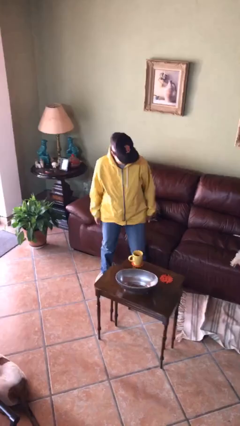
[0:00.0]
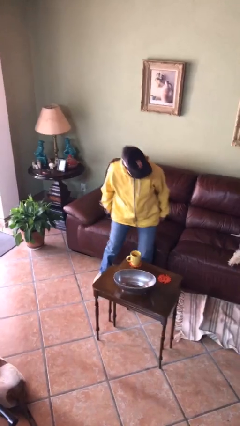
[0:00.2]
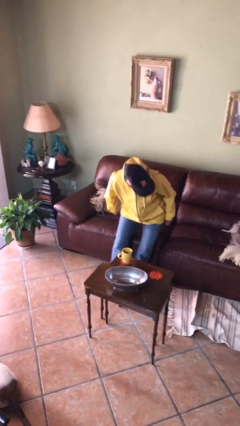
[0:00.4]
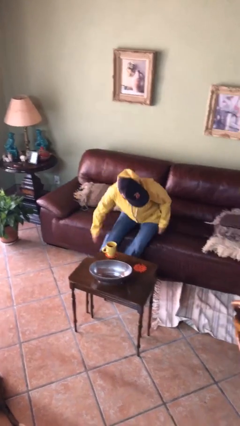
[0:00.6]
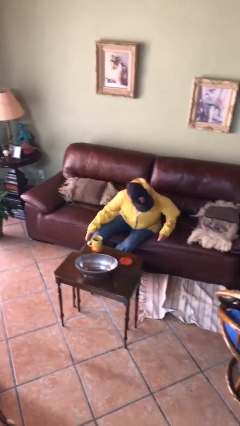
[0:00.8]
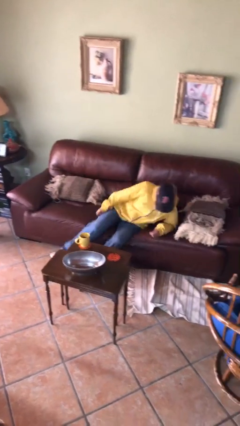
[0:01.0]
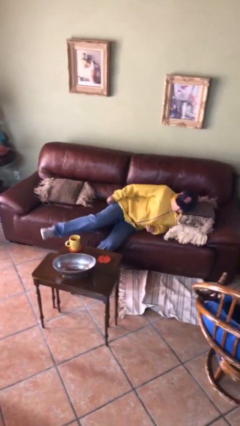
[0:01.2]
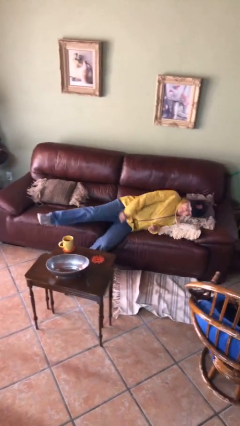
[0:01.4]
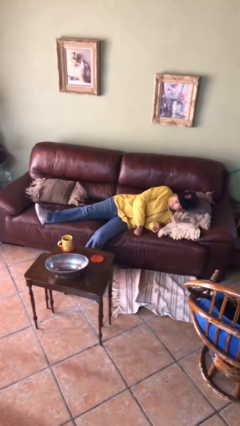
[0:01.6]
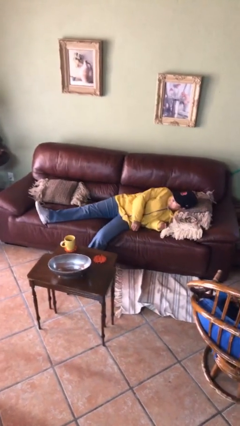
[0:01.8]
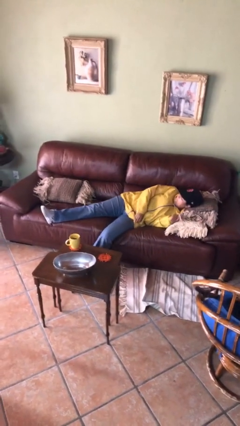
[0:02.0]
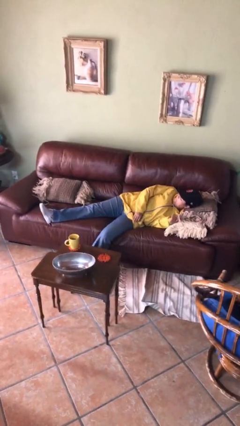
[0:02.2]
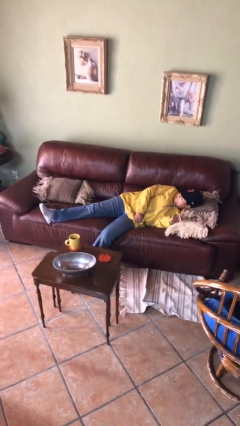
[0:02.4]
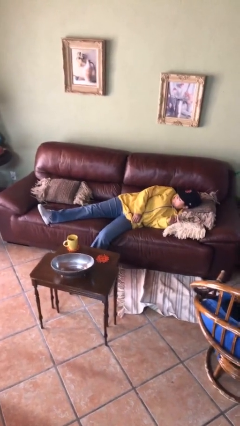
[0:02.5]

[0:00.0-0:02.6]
person lies down on couch

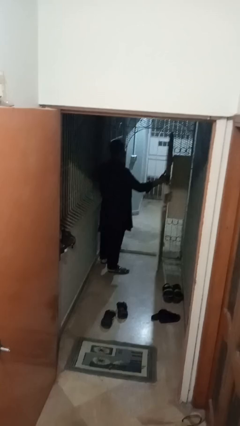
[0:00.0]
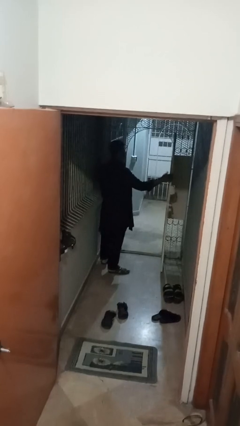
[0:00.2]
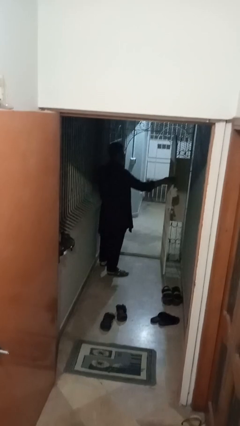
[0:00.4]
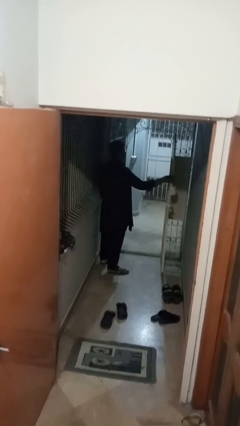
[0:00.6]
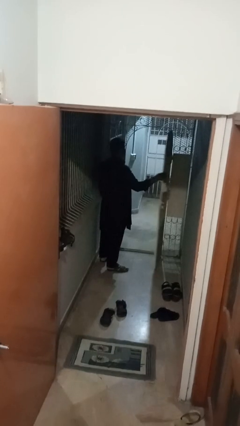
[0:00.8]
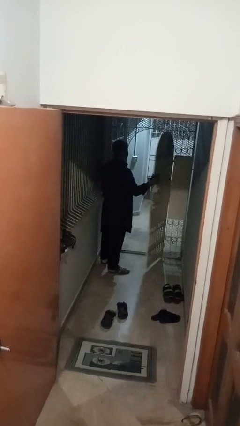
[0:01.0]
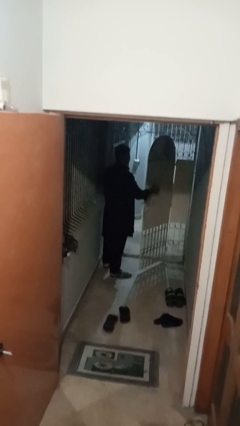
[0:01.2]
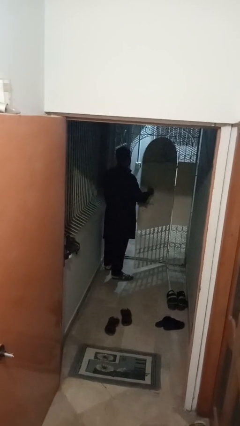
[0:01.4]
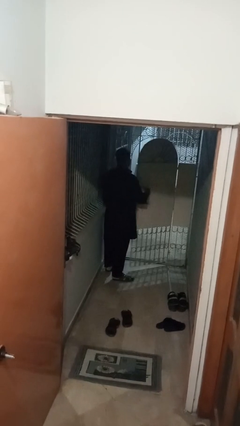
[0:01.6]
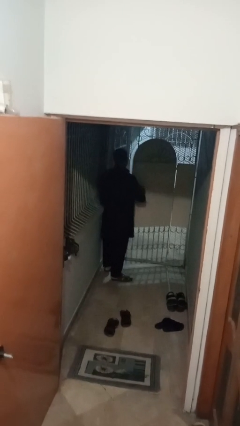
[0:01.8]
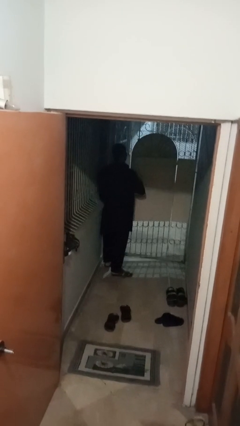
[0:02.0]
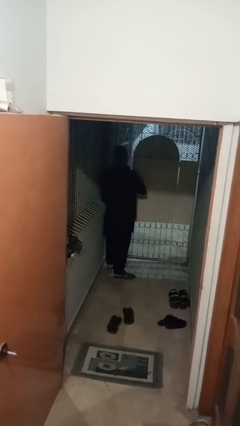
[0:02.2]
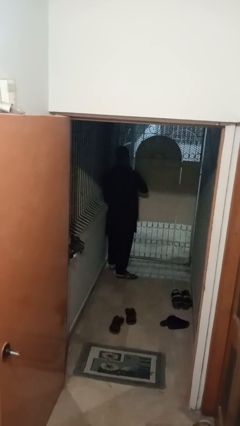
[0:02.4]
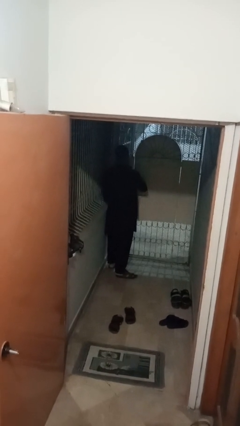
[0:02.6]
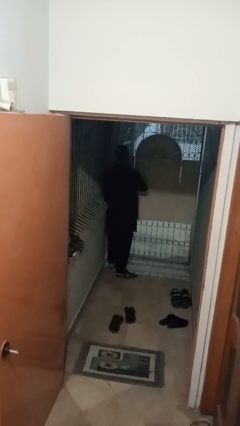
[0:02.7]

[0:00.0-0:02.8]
person closes gate

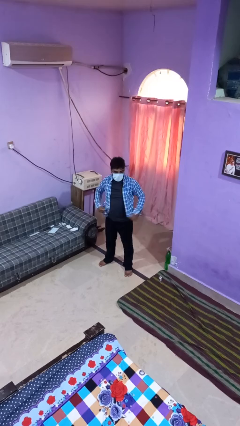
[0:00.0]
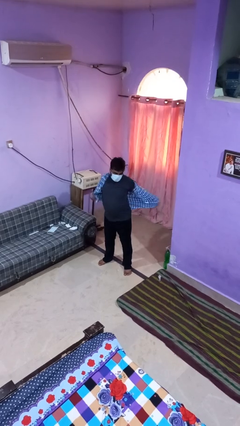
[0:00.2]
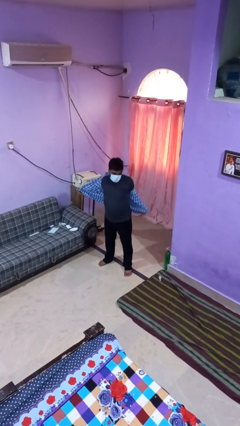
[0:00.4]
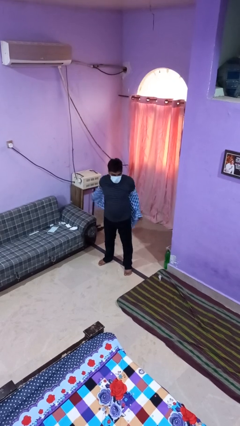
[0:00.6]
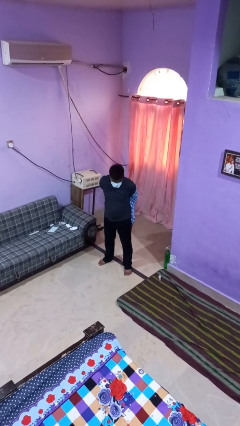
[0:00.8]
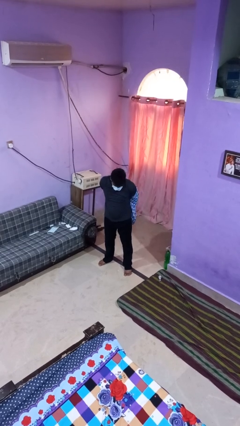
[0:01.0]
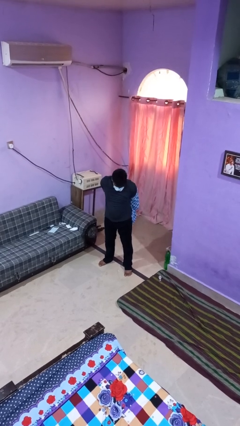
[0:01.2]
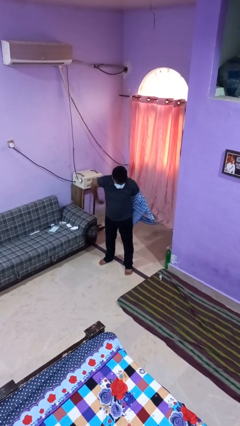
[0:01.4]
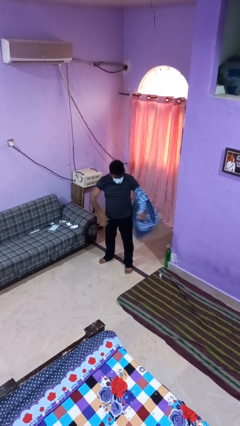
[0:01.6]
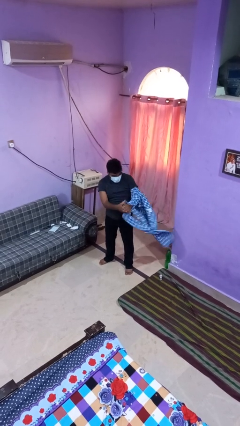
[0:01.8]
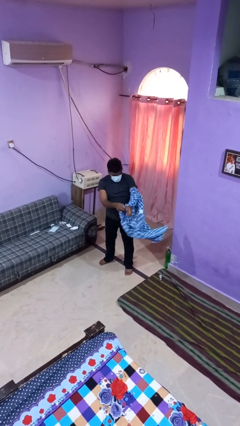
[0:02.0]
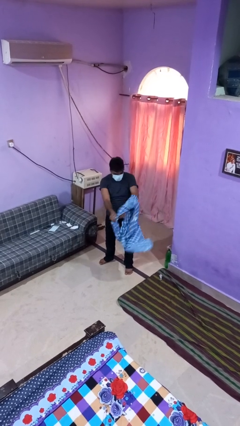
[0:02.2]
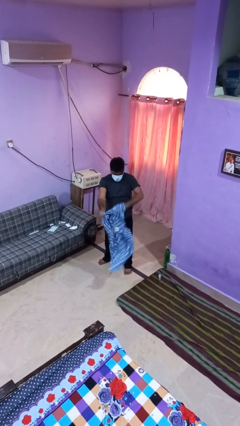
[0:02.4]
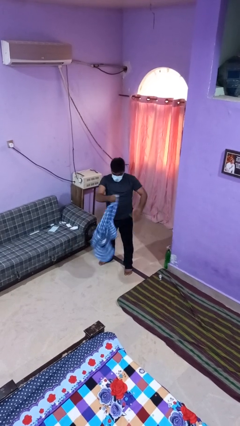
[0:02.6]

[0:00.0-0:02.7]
person takes off shirt

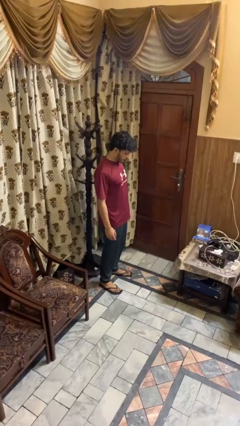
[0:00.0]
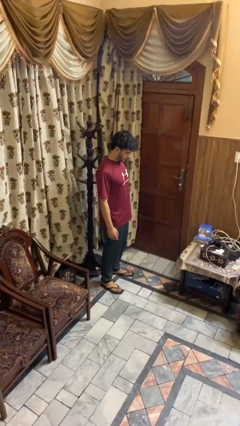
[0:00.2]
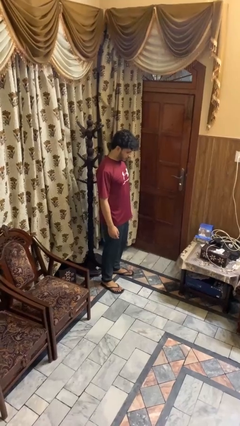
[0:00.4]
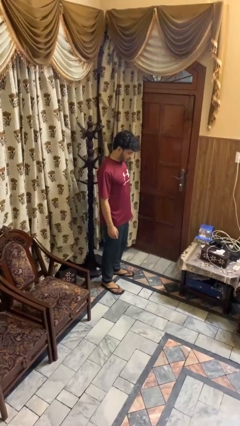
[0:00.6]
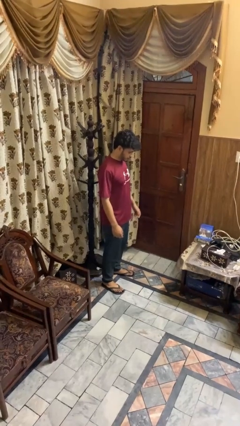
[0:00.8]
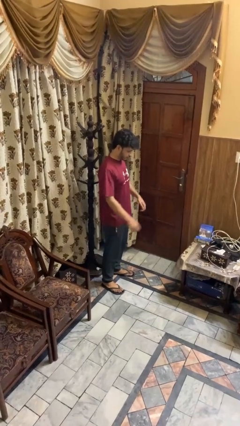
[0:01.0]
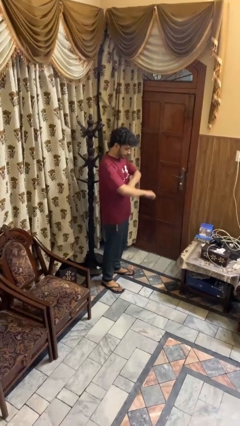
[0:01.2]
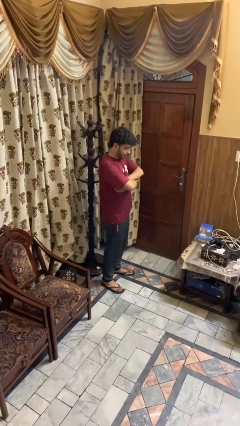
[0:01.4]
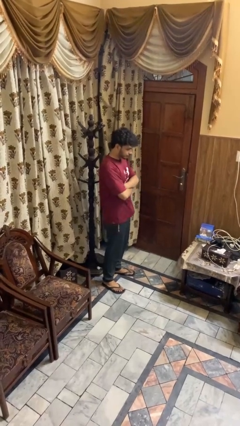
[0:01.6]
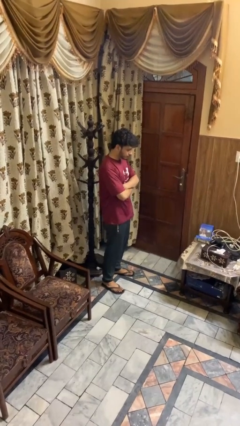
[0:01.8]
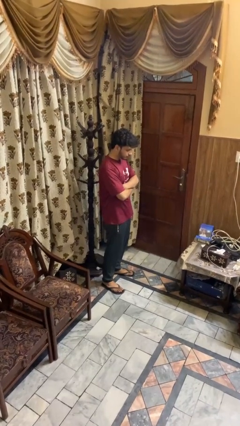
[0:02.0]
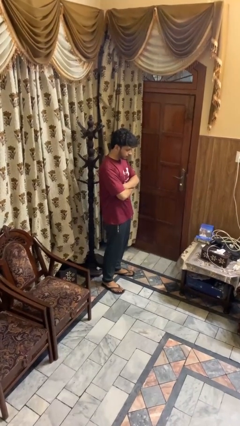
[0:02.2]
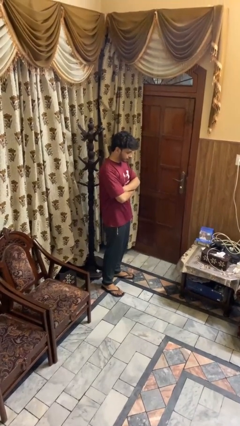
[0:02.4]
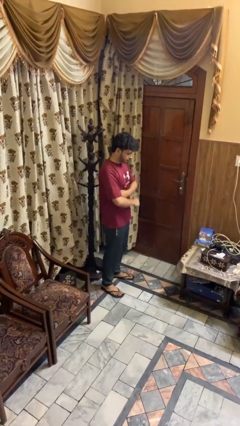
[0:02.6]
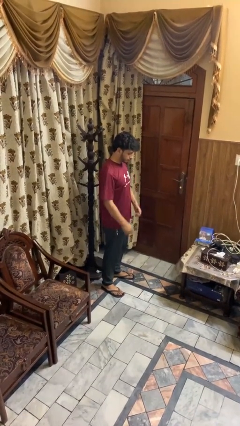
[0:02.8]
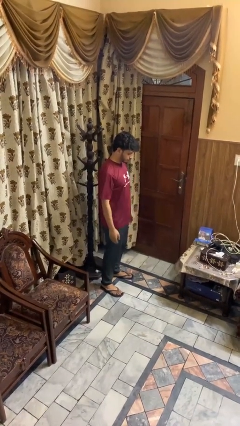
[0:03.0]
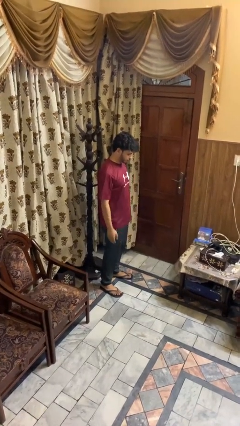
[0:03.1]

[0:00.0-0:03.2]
person crosses arms

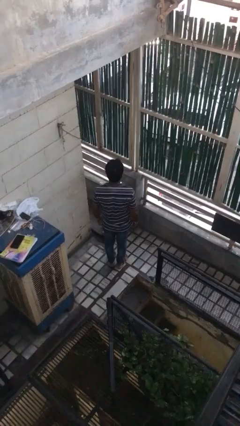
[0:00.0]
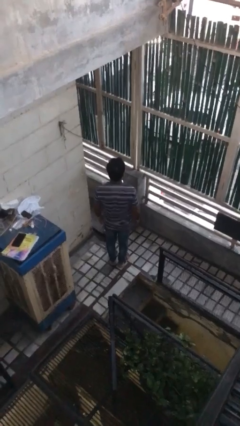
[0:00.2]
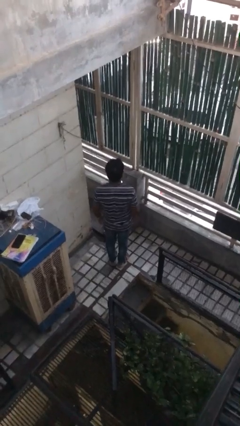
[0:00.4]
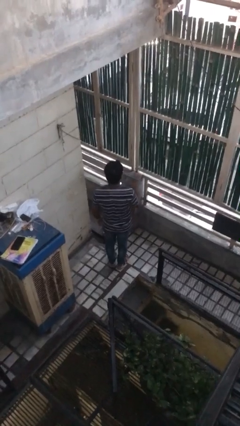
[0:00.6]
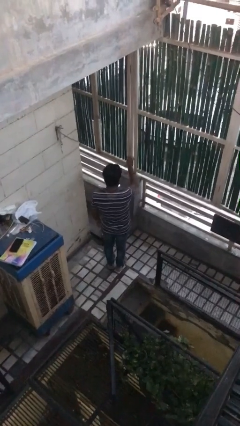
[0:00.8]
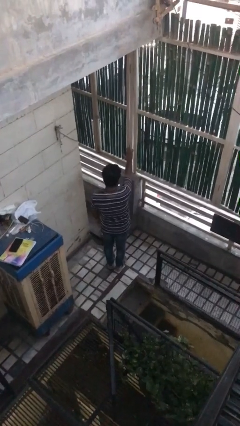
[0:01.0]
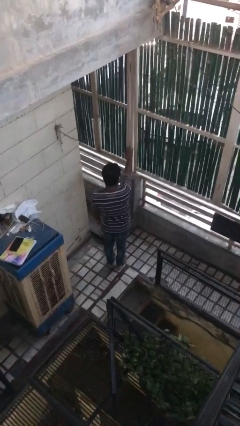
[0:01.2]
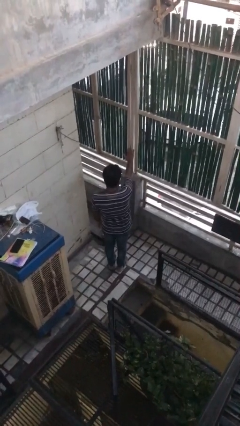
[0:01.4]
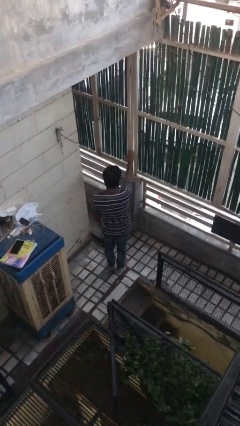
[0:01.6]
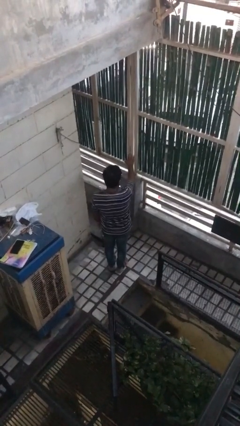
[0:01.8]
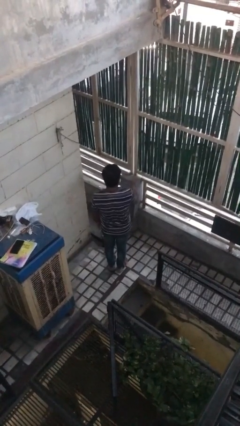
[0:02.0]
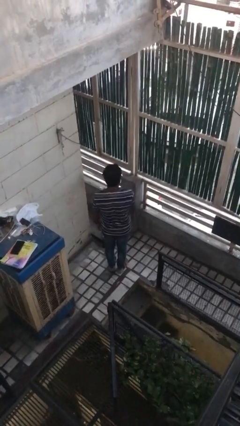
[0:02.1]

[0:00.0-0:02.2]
person gestures stop

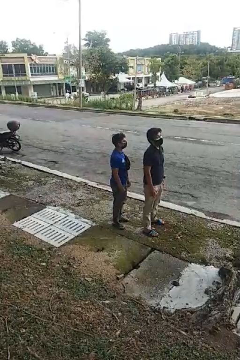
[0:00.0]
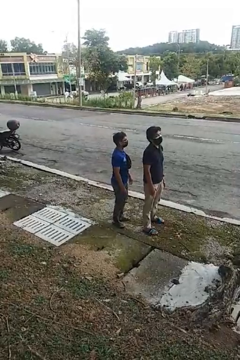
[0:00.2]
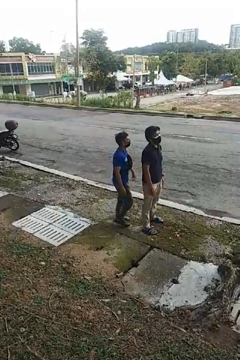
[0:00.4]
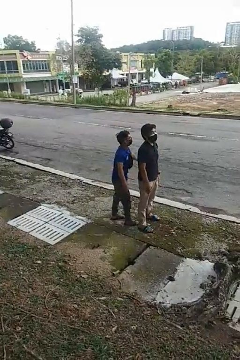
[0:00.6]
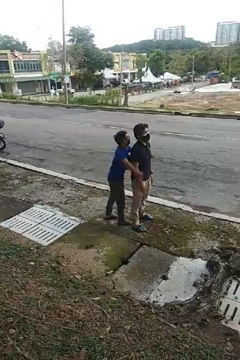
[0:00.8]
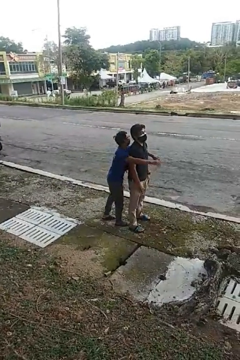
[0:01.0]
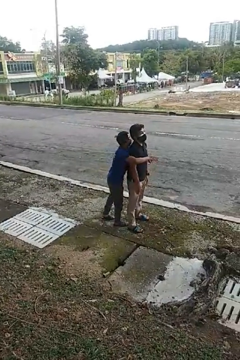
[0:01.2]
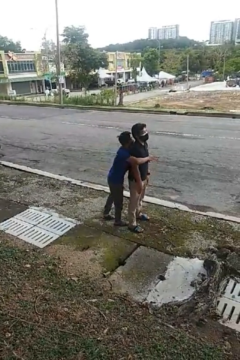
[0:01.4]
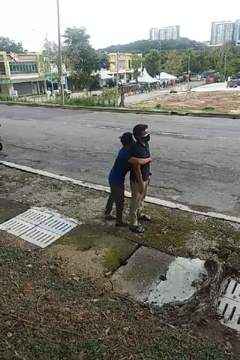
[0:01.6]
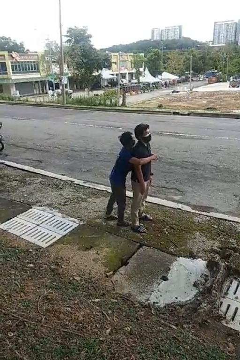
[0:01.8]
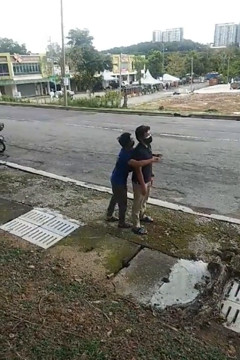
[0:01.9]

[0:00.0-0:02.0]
person hugs person from behind

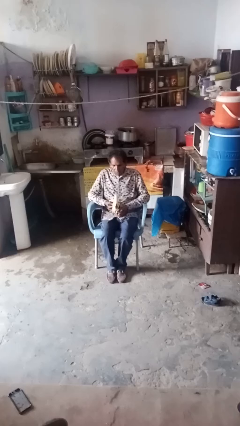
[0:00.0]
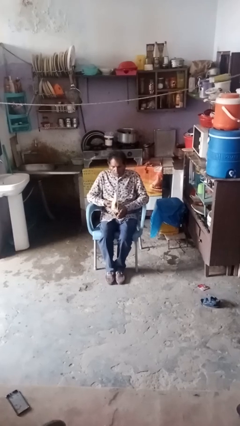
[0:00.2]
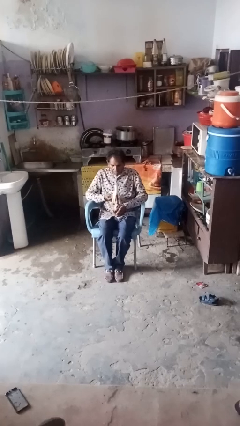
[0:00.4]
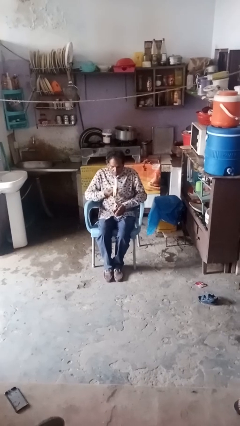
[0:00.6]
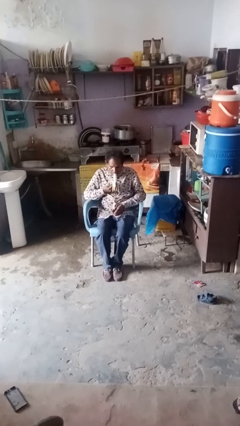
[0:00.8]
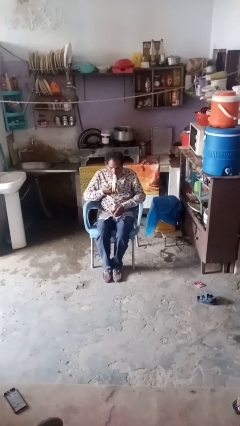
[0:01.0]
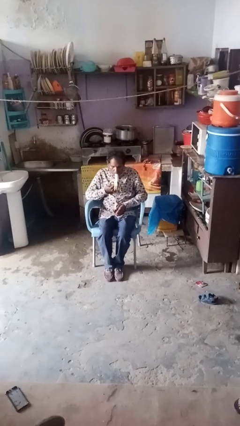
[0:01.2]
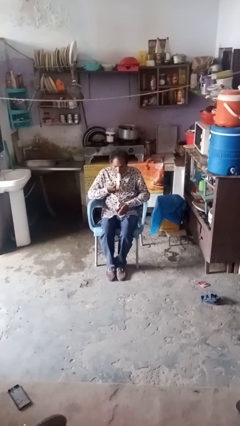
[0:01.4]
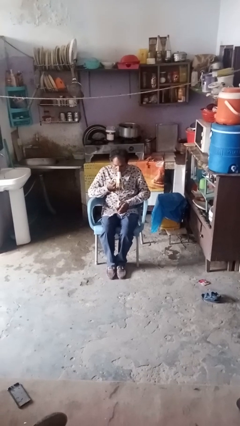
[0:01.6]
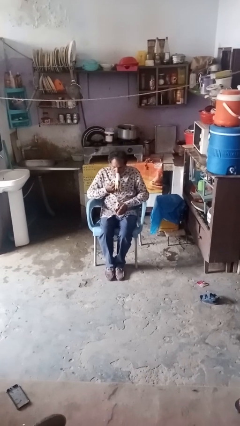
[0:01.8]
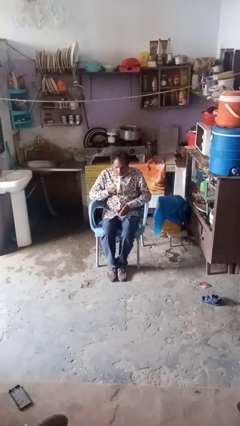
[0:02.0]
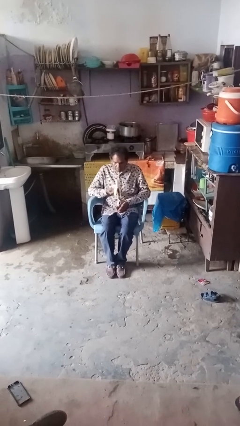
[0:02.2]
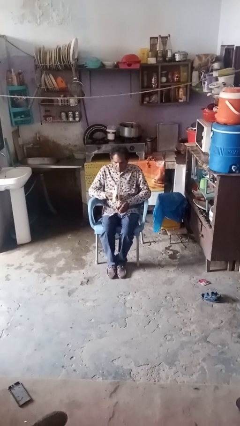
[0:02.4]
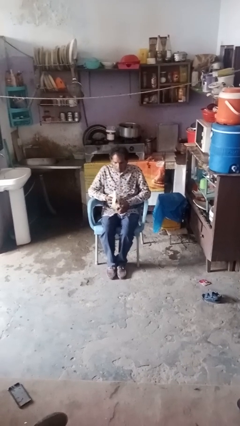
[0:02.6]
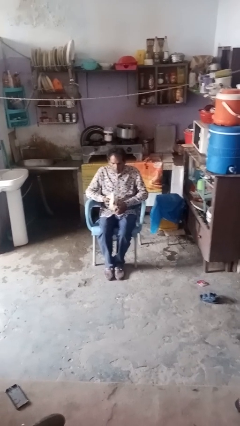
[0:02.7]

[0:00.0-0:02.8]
person eats banana
